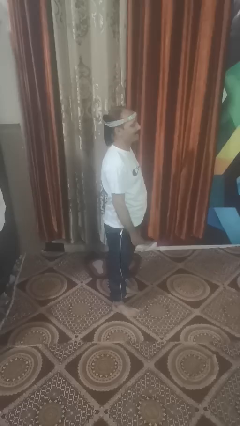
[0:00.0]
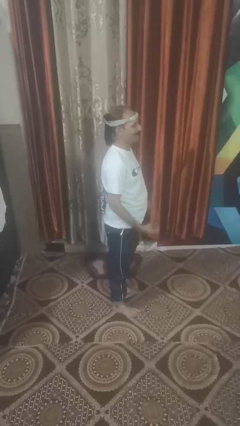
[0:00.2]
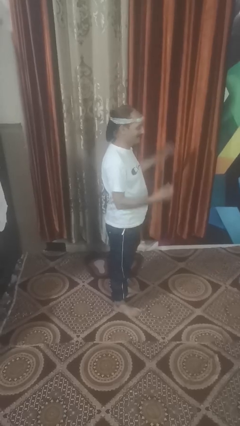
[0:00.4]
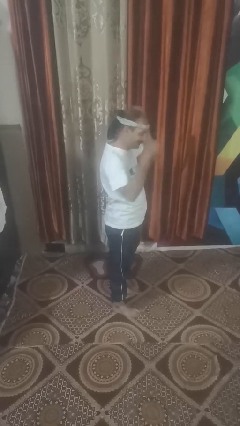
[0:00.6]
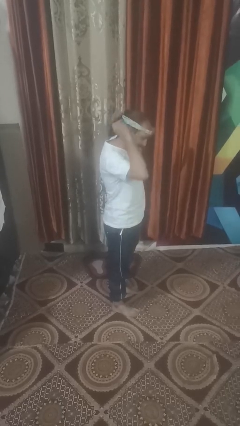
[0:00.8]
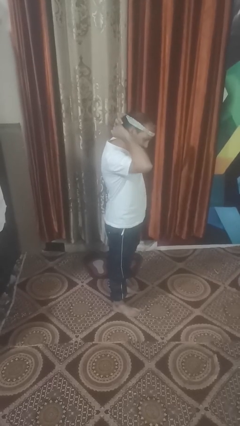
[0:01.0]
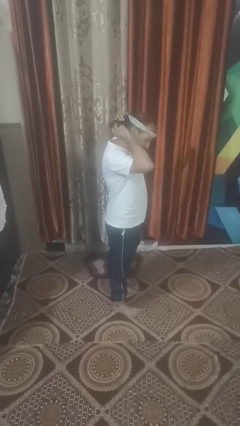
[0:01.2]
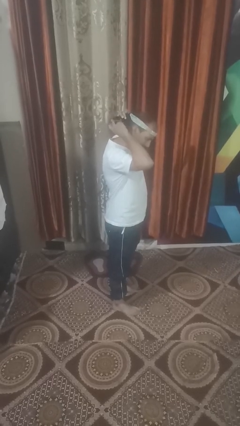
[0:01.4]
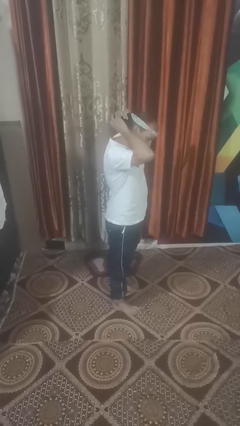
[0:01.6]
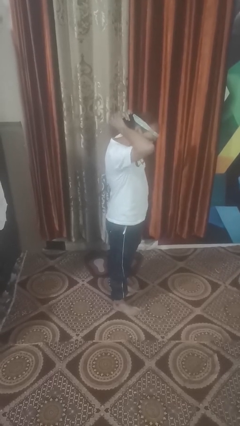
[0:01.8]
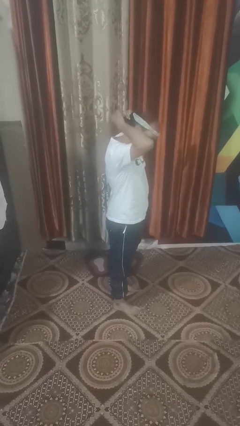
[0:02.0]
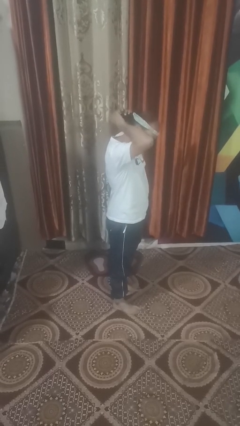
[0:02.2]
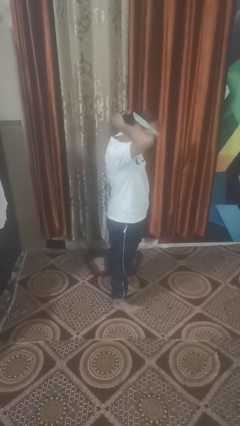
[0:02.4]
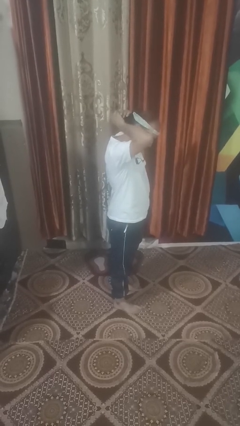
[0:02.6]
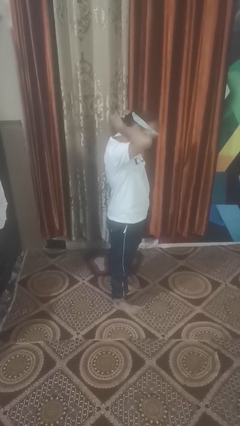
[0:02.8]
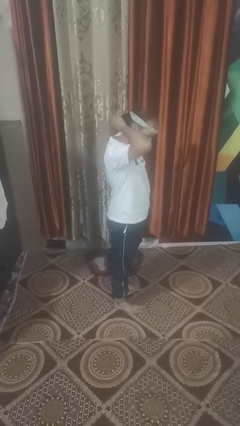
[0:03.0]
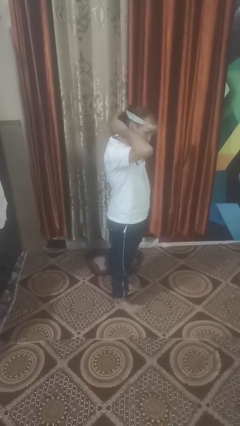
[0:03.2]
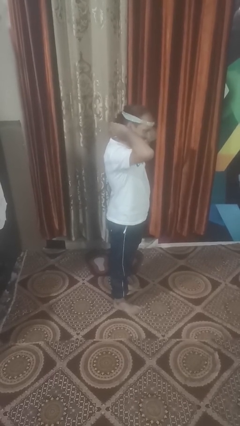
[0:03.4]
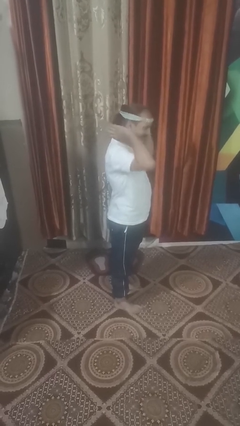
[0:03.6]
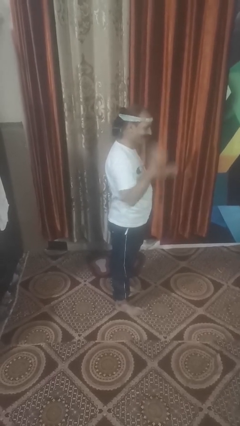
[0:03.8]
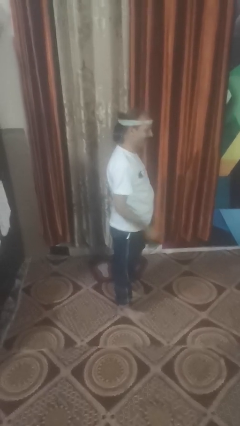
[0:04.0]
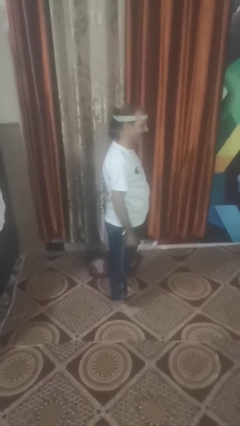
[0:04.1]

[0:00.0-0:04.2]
person puts hair in ponytail

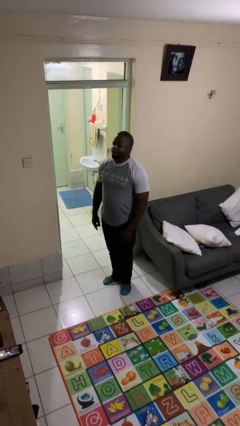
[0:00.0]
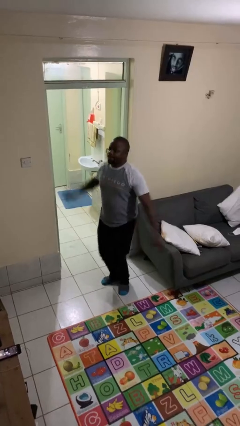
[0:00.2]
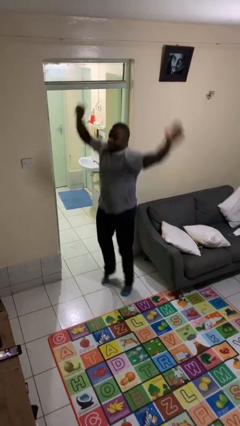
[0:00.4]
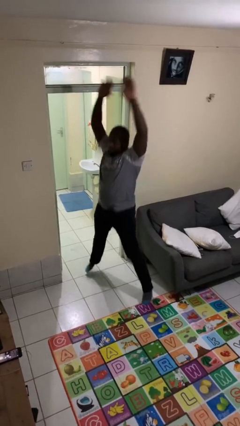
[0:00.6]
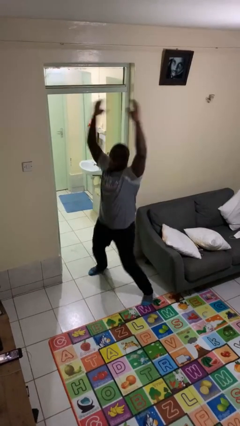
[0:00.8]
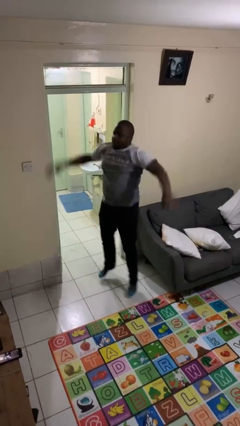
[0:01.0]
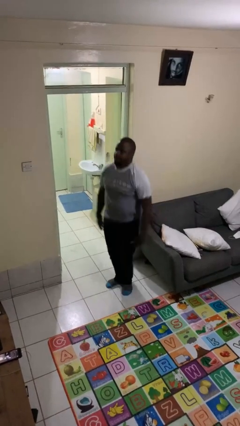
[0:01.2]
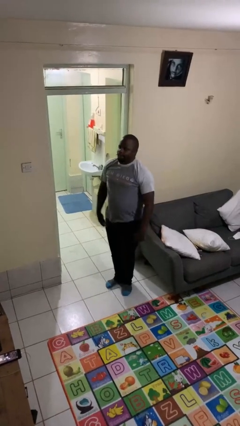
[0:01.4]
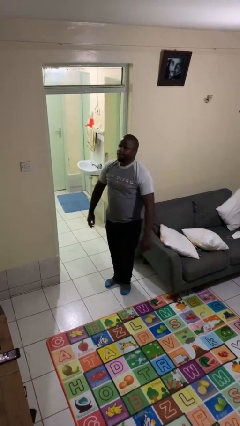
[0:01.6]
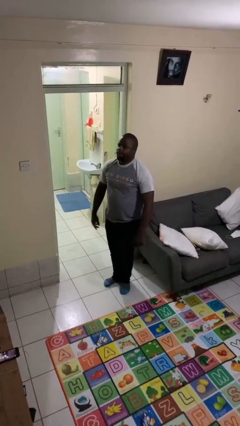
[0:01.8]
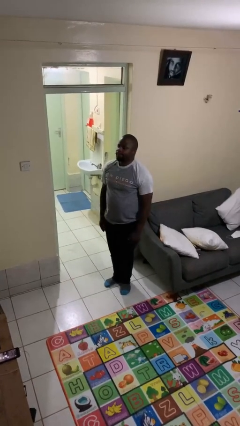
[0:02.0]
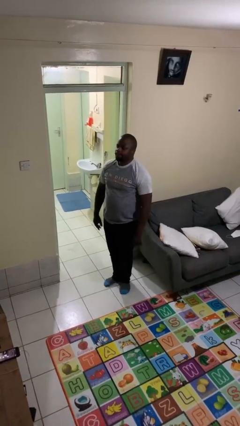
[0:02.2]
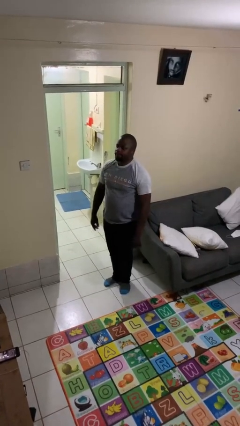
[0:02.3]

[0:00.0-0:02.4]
person exercises with jumping jacks

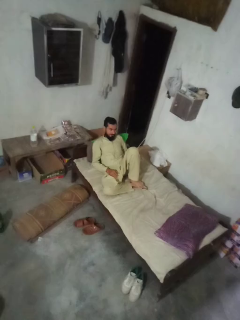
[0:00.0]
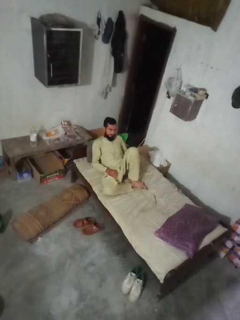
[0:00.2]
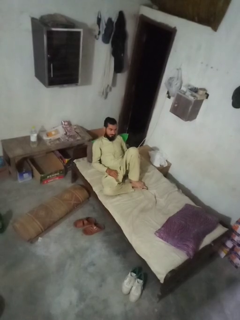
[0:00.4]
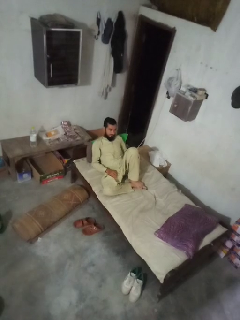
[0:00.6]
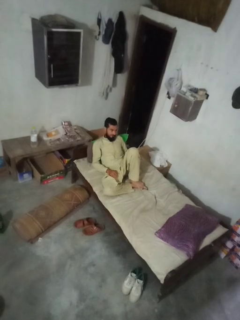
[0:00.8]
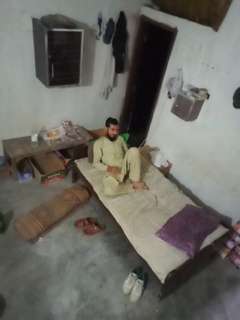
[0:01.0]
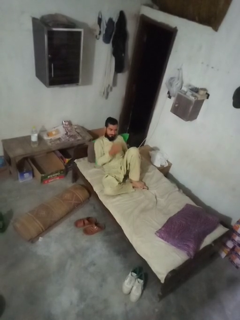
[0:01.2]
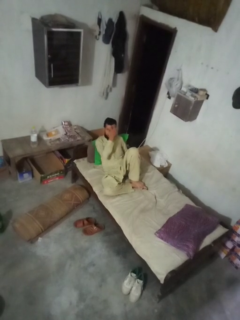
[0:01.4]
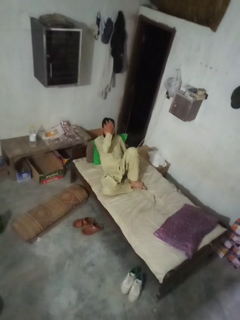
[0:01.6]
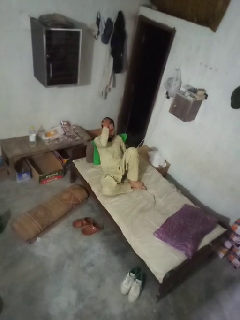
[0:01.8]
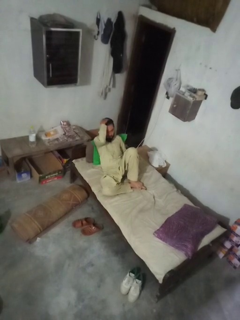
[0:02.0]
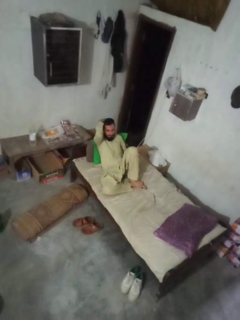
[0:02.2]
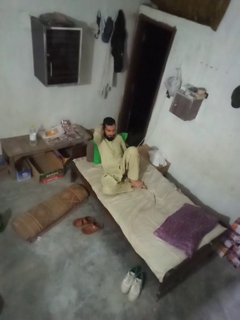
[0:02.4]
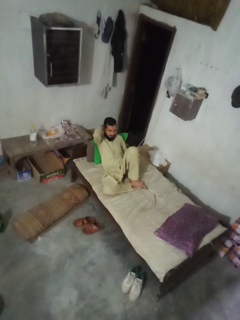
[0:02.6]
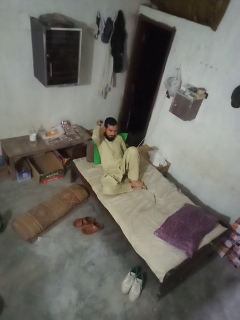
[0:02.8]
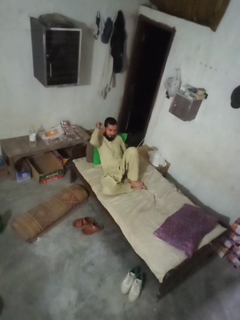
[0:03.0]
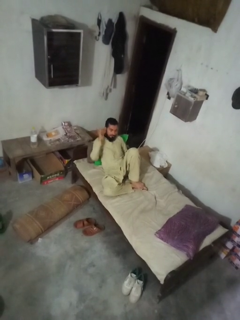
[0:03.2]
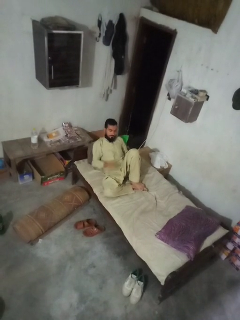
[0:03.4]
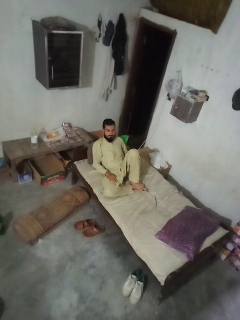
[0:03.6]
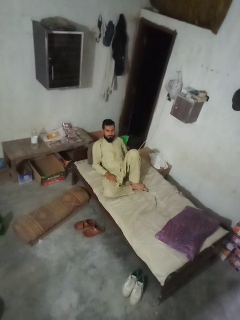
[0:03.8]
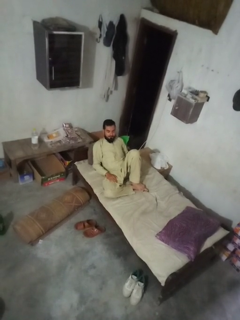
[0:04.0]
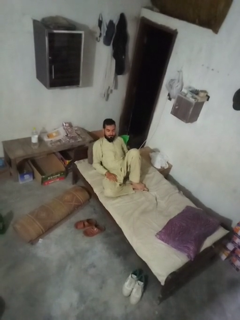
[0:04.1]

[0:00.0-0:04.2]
person strokes hair

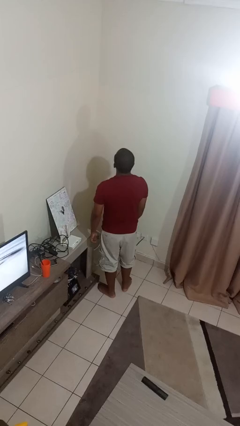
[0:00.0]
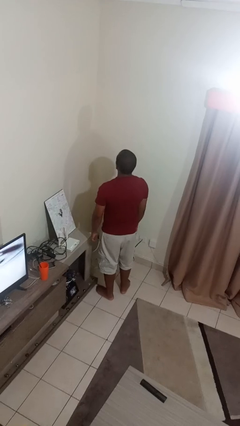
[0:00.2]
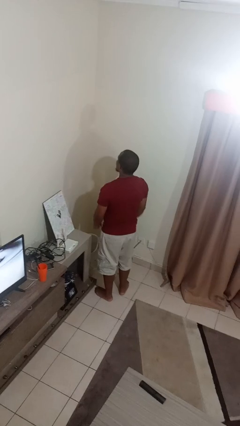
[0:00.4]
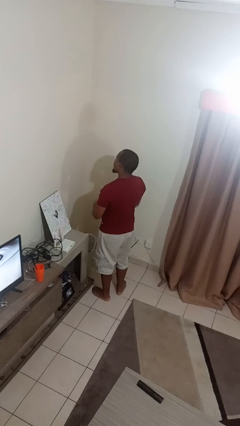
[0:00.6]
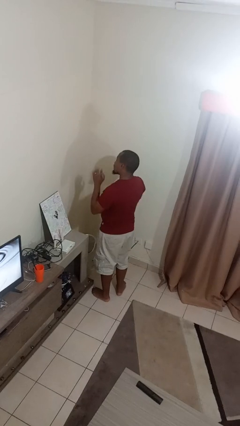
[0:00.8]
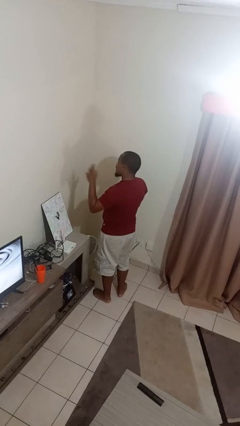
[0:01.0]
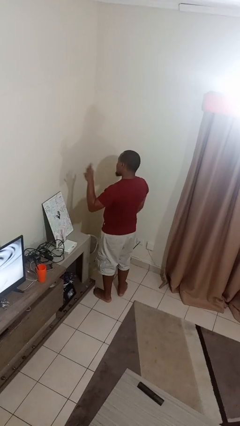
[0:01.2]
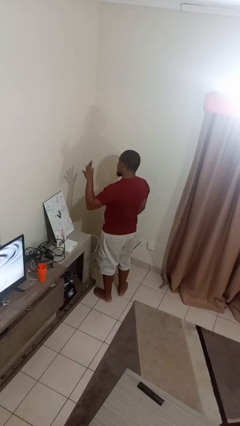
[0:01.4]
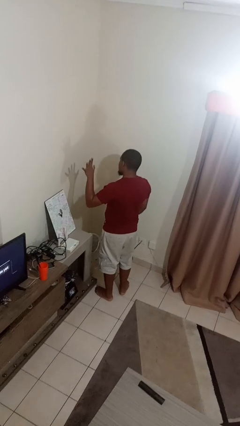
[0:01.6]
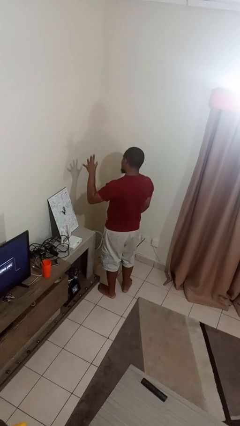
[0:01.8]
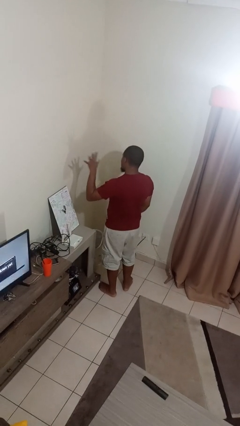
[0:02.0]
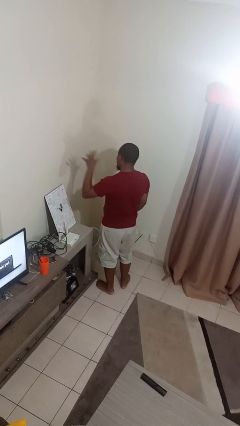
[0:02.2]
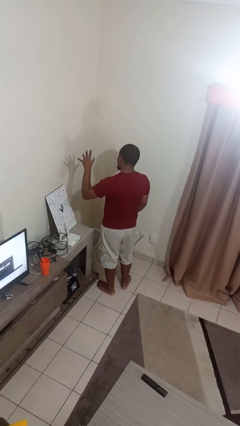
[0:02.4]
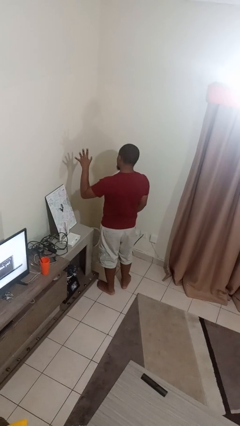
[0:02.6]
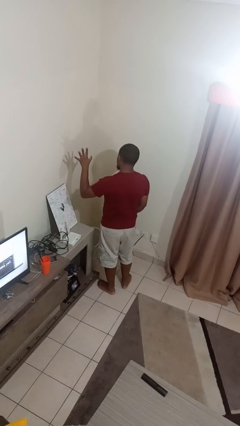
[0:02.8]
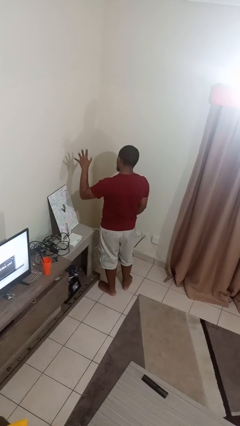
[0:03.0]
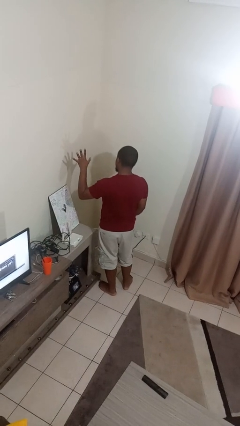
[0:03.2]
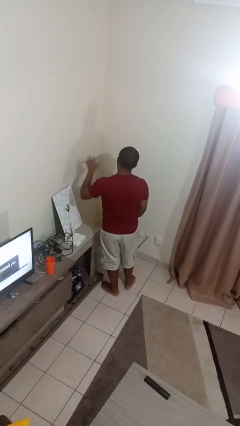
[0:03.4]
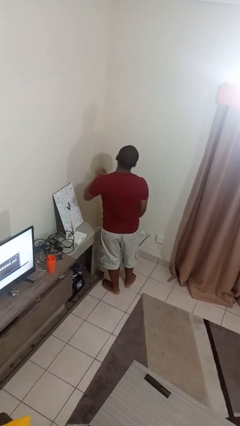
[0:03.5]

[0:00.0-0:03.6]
person gestures number five

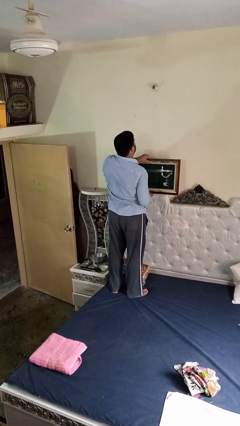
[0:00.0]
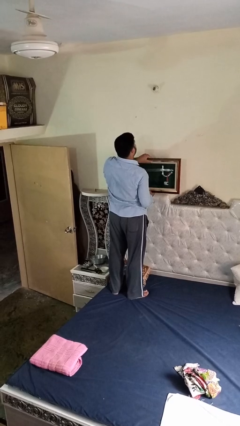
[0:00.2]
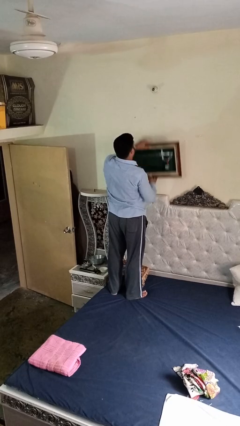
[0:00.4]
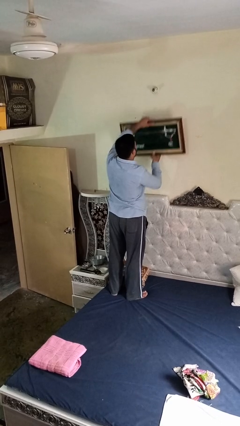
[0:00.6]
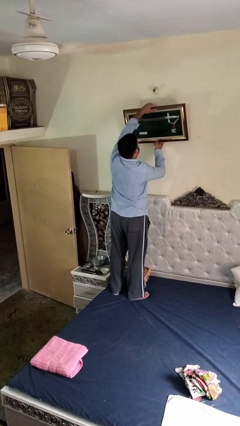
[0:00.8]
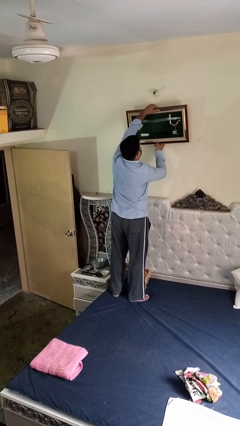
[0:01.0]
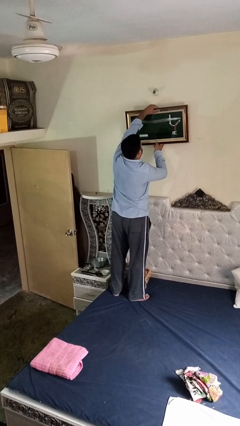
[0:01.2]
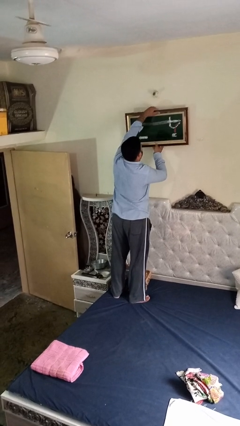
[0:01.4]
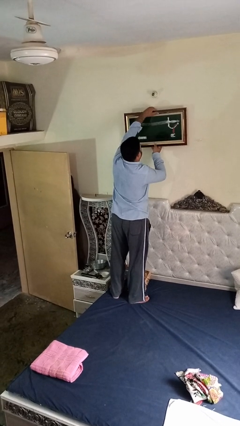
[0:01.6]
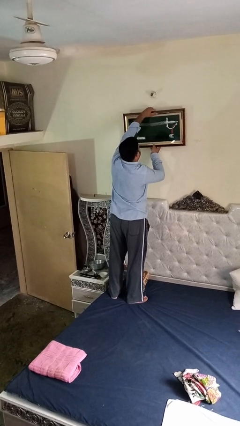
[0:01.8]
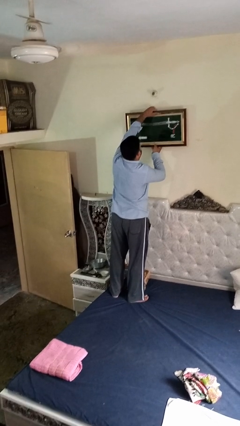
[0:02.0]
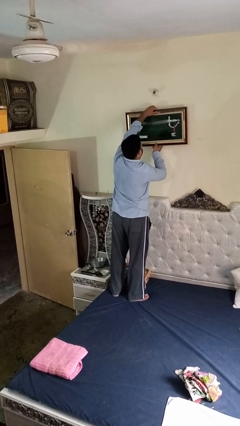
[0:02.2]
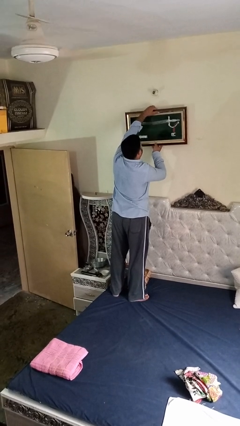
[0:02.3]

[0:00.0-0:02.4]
person puts up picture frame

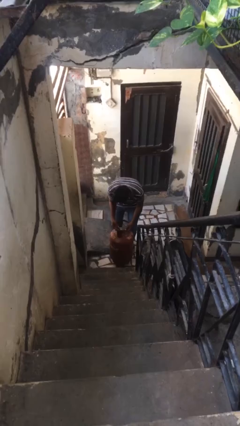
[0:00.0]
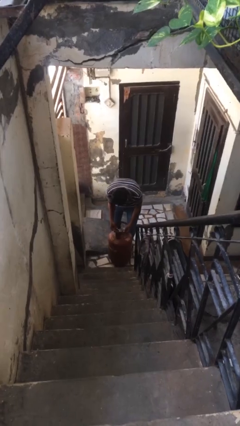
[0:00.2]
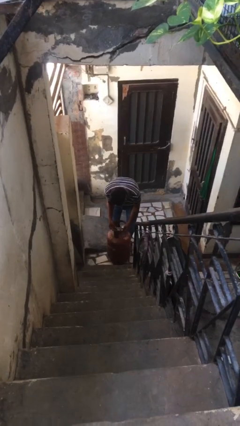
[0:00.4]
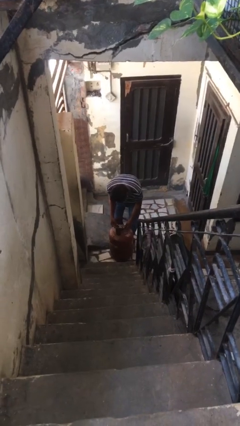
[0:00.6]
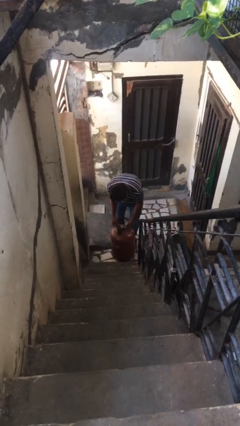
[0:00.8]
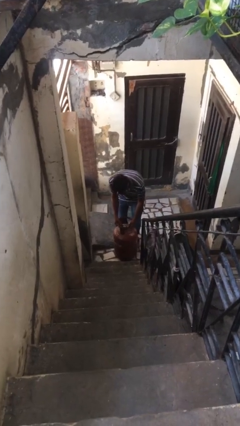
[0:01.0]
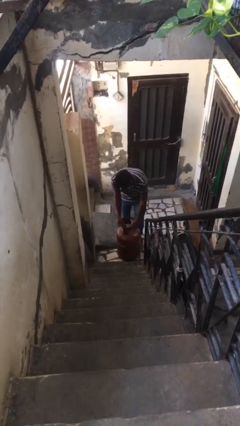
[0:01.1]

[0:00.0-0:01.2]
person puts down object on floor

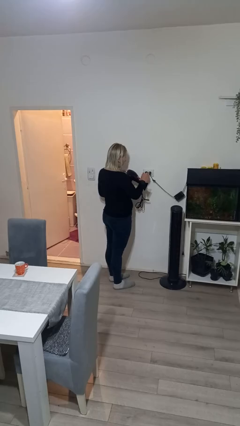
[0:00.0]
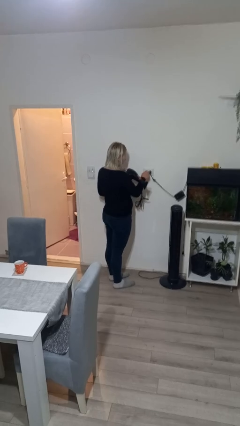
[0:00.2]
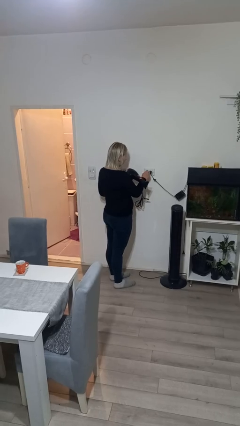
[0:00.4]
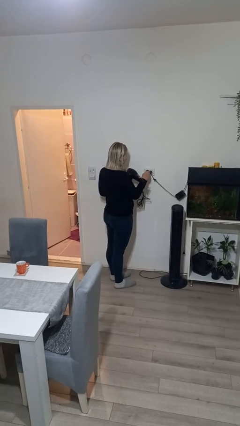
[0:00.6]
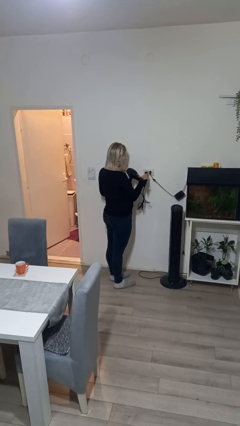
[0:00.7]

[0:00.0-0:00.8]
person unplugs from electrical socket
